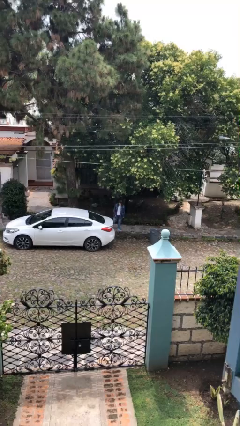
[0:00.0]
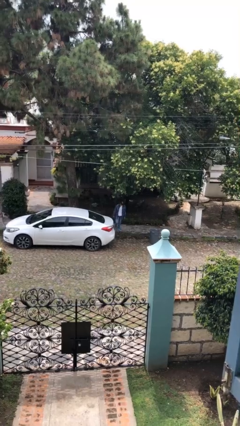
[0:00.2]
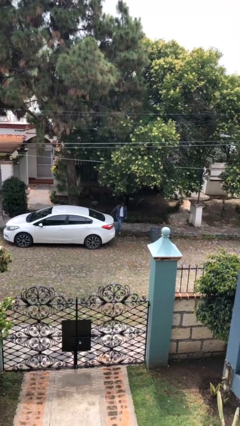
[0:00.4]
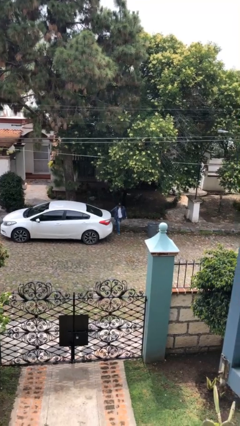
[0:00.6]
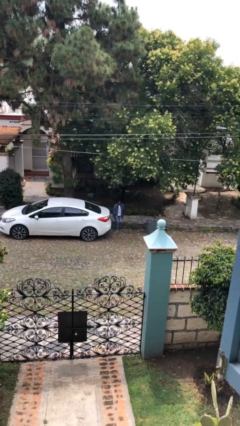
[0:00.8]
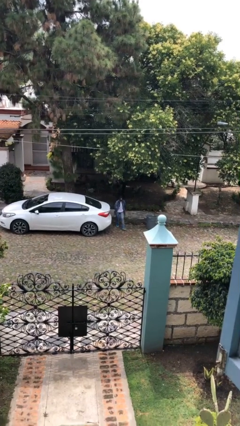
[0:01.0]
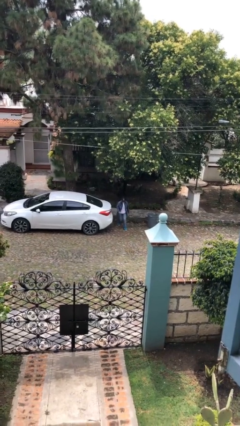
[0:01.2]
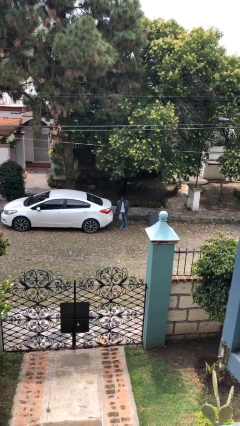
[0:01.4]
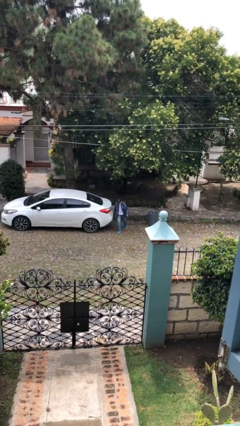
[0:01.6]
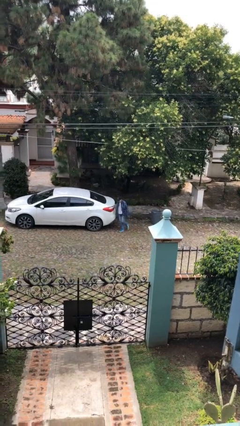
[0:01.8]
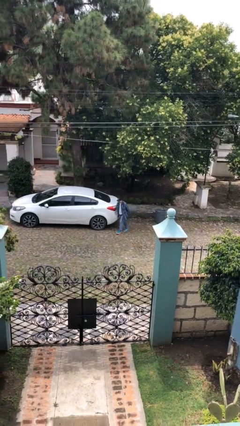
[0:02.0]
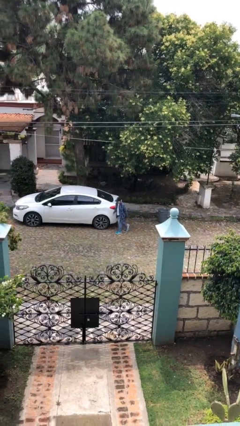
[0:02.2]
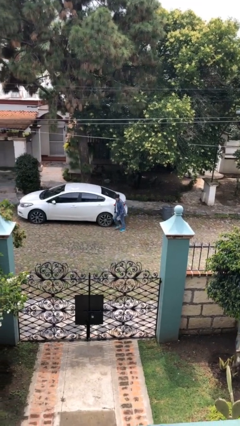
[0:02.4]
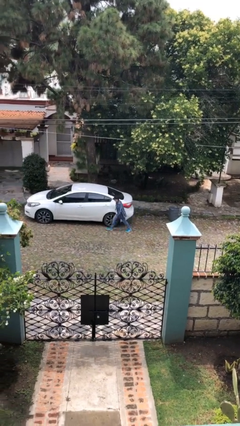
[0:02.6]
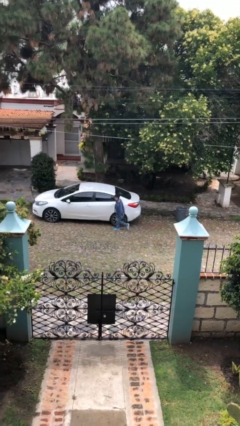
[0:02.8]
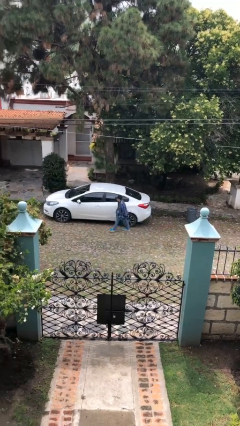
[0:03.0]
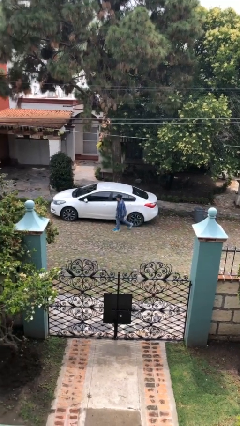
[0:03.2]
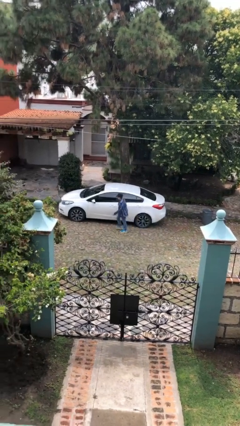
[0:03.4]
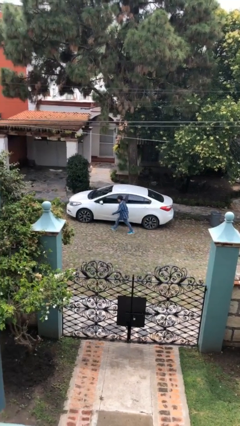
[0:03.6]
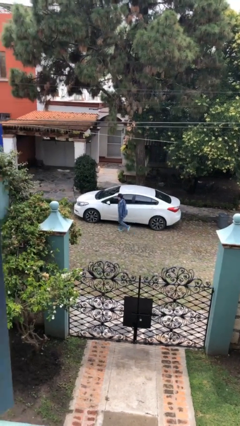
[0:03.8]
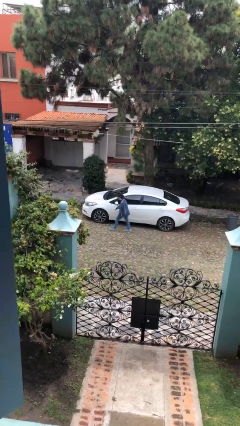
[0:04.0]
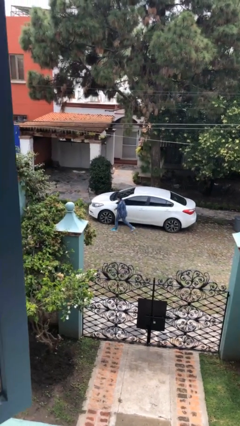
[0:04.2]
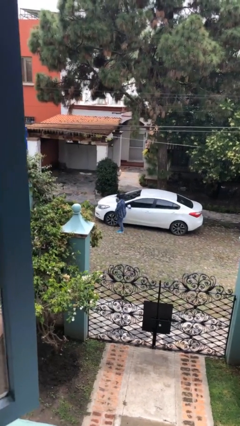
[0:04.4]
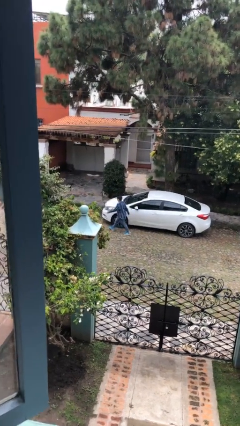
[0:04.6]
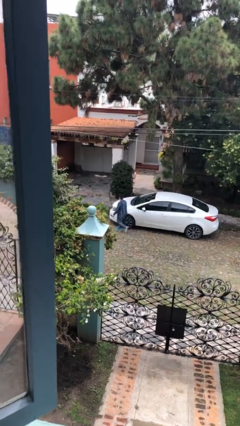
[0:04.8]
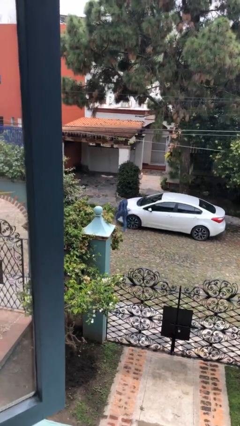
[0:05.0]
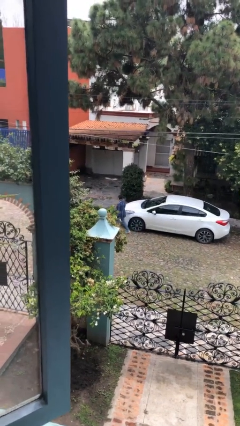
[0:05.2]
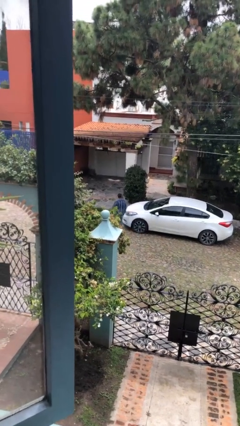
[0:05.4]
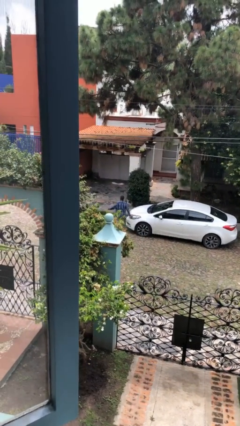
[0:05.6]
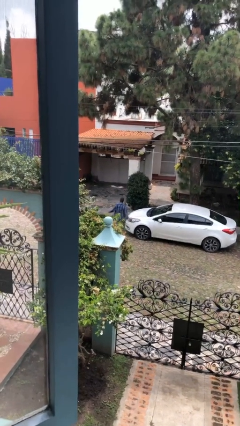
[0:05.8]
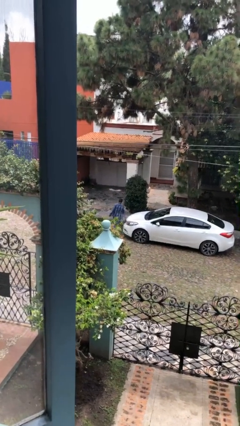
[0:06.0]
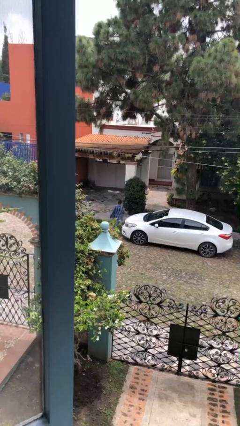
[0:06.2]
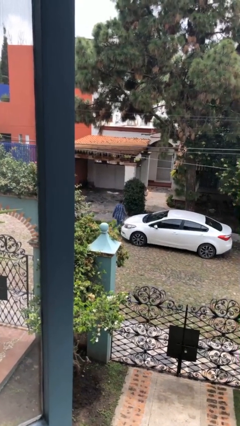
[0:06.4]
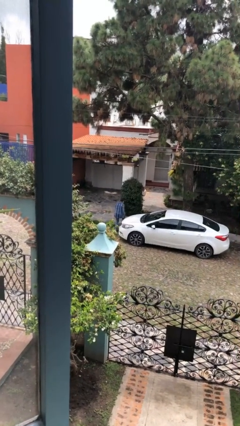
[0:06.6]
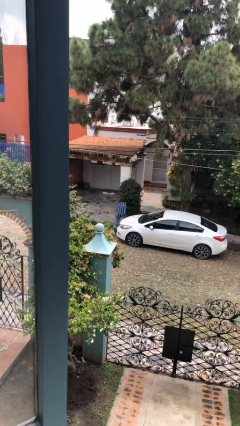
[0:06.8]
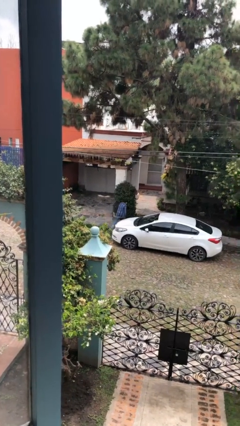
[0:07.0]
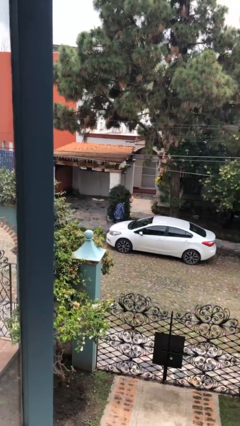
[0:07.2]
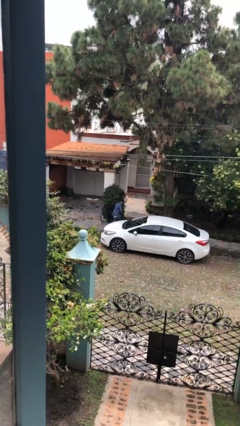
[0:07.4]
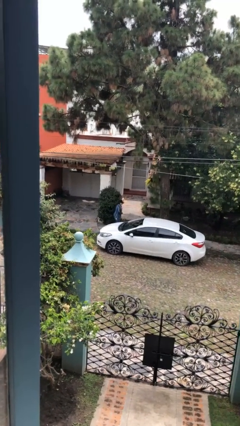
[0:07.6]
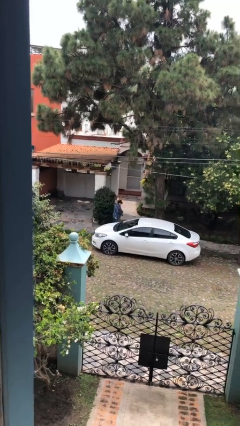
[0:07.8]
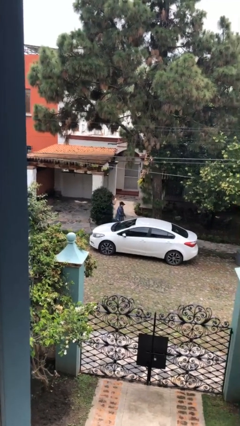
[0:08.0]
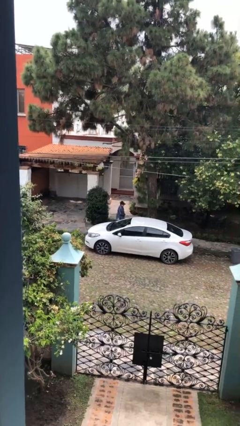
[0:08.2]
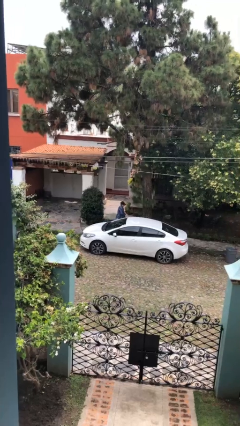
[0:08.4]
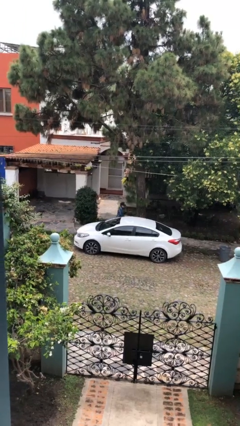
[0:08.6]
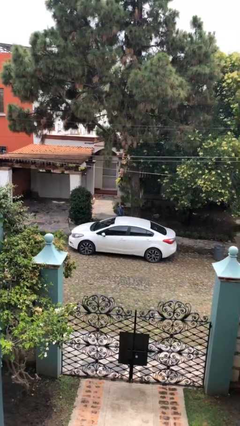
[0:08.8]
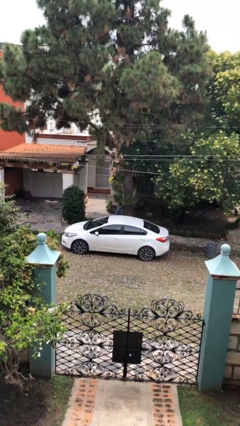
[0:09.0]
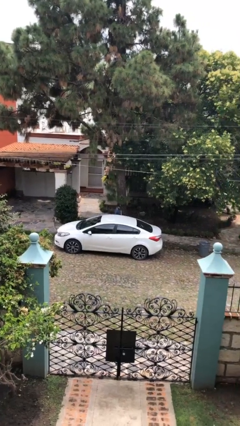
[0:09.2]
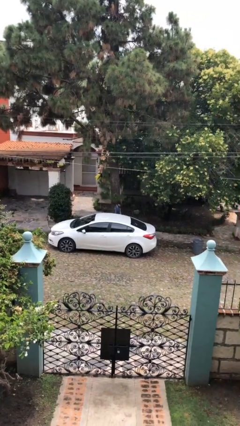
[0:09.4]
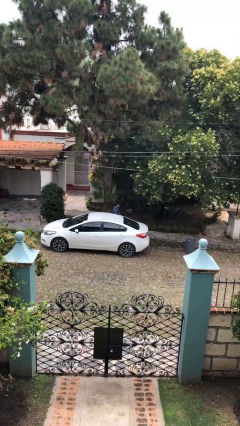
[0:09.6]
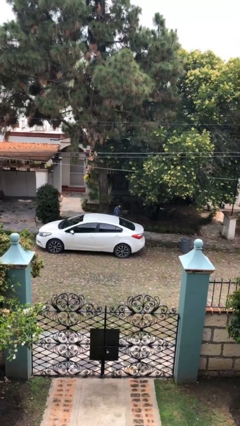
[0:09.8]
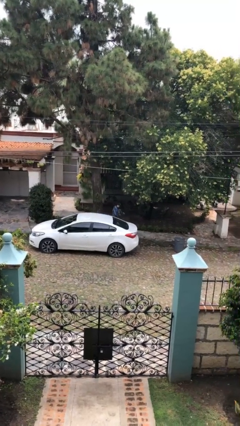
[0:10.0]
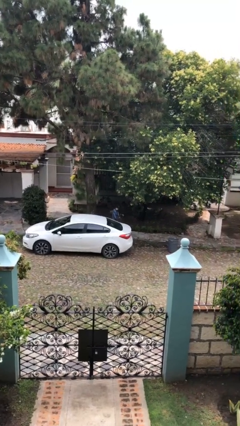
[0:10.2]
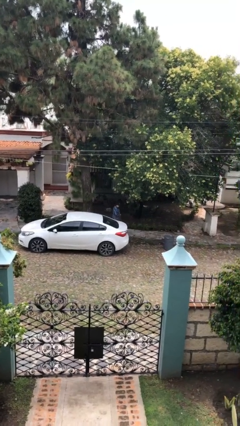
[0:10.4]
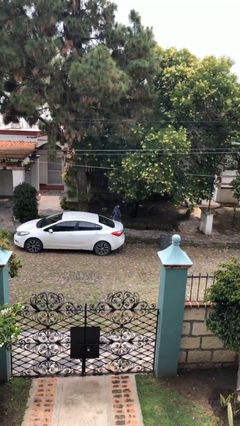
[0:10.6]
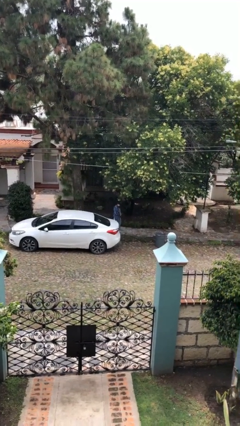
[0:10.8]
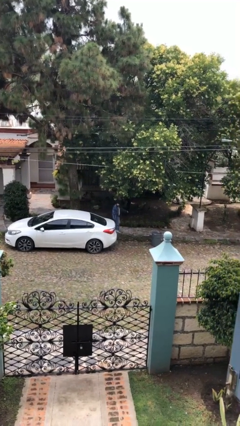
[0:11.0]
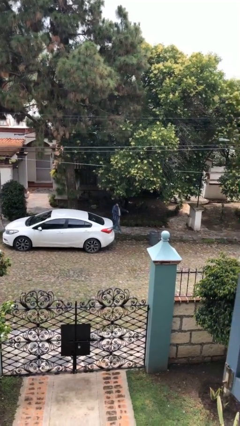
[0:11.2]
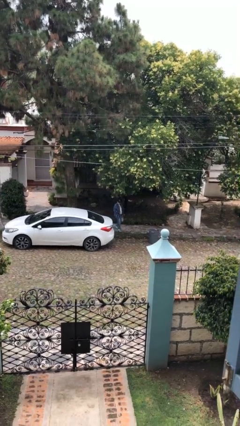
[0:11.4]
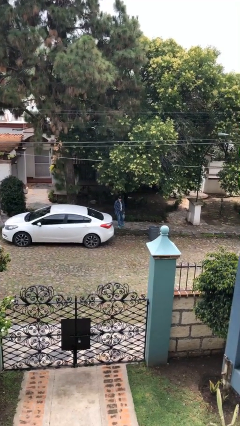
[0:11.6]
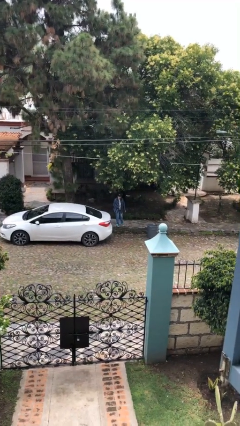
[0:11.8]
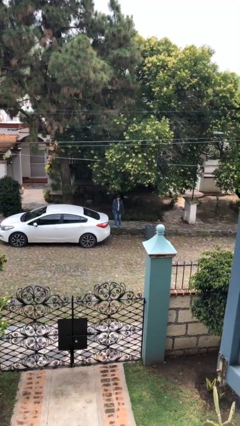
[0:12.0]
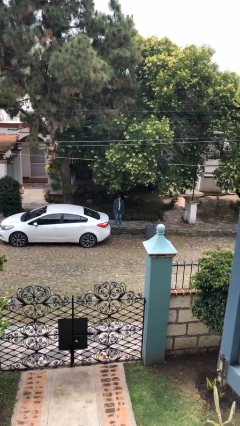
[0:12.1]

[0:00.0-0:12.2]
person walks around car

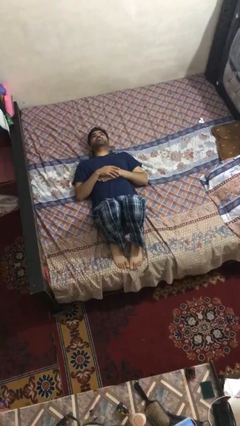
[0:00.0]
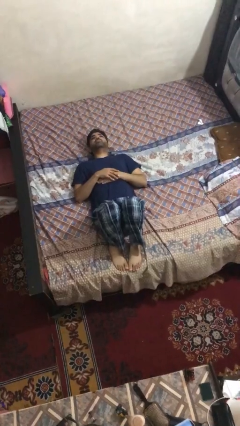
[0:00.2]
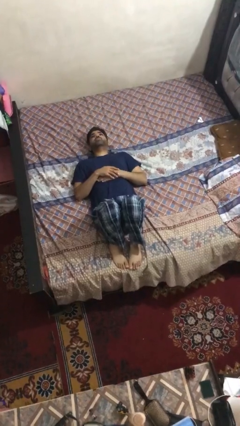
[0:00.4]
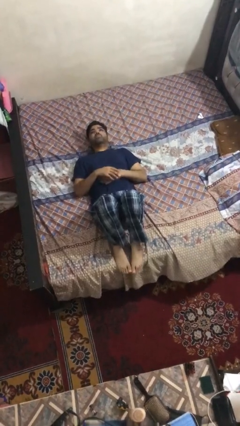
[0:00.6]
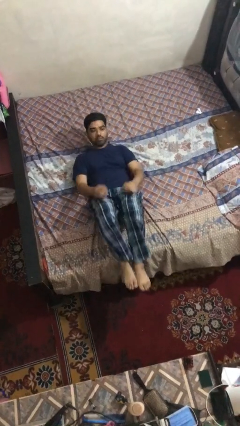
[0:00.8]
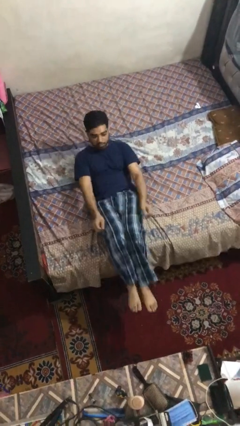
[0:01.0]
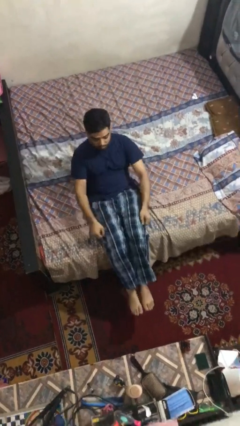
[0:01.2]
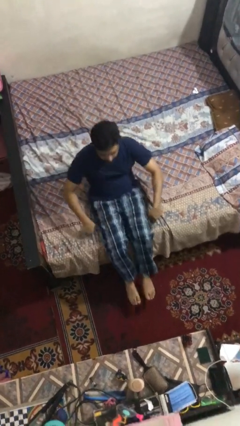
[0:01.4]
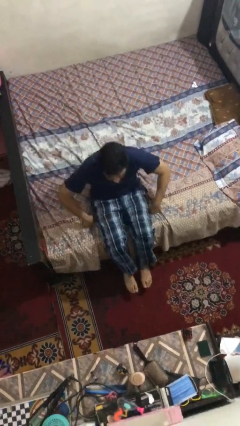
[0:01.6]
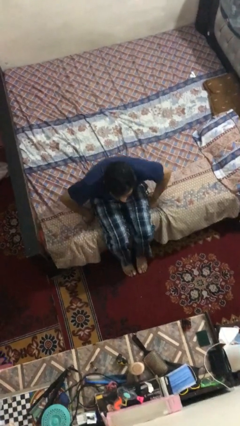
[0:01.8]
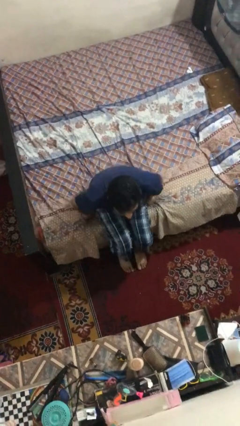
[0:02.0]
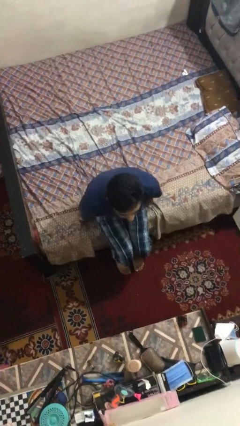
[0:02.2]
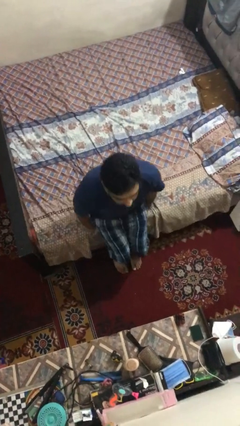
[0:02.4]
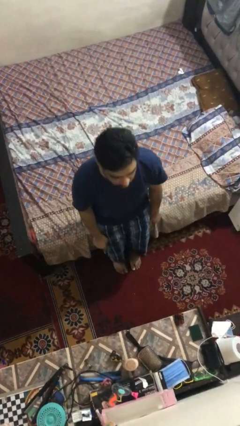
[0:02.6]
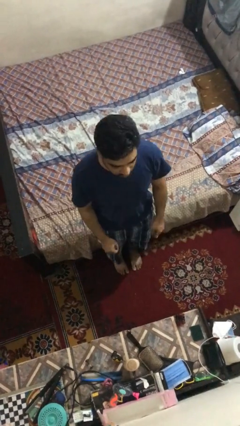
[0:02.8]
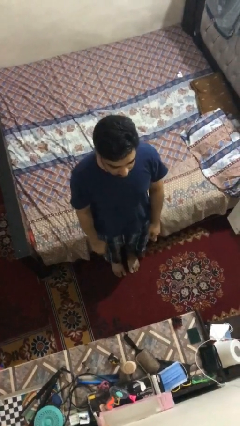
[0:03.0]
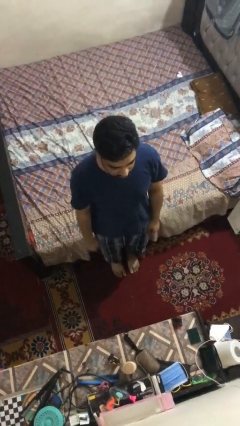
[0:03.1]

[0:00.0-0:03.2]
person stands up

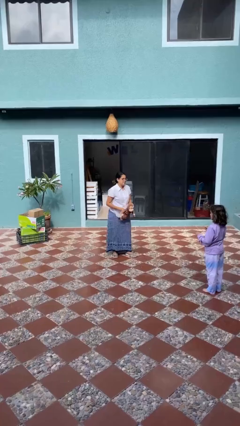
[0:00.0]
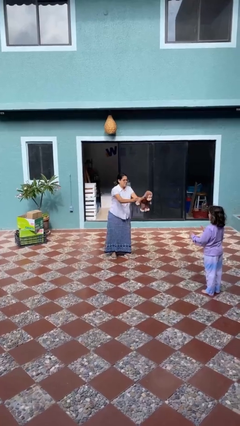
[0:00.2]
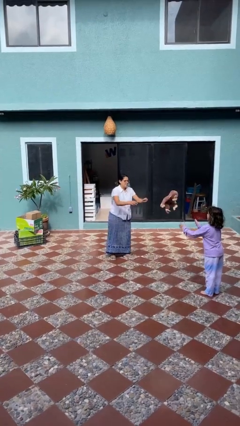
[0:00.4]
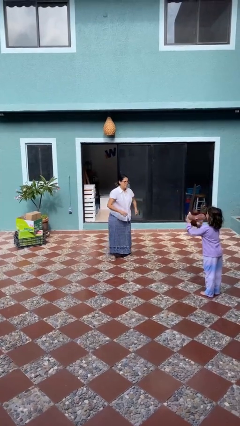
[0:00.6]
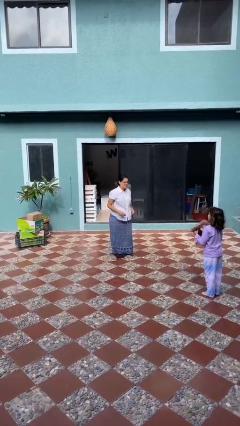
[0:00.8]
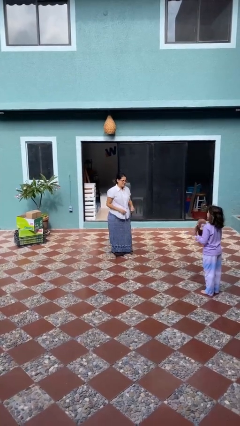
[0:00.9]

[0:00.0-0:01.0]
person throws object to person

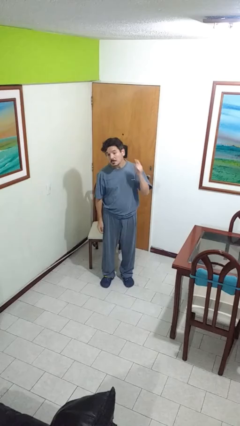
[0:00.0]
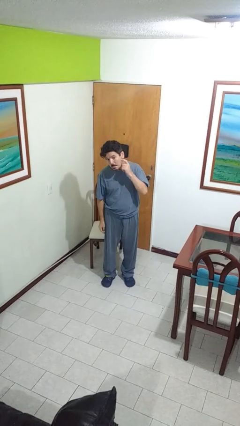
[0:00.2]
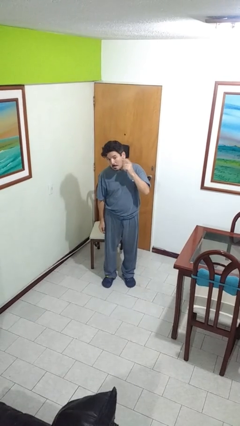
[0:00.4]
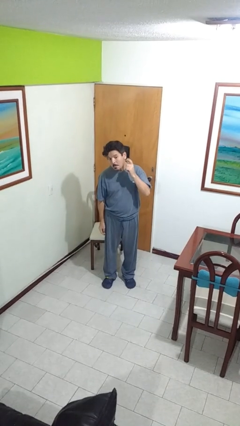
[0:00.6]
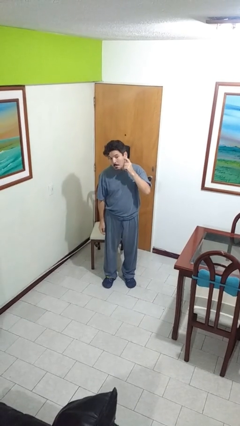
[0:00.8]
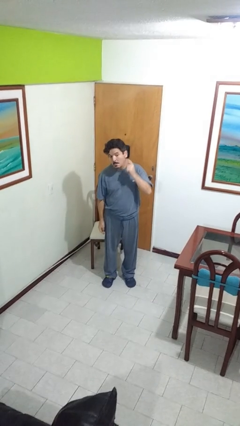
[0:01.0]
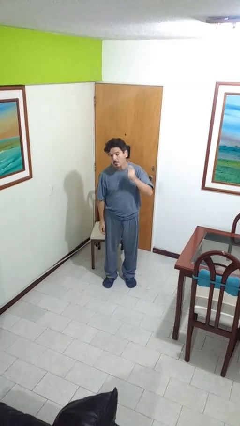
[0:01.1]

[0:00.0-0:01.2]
person gestures listen closely

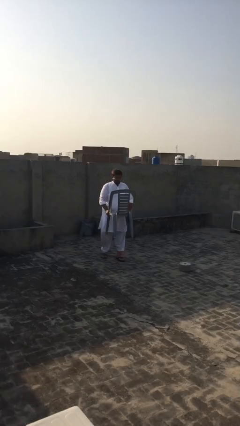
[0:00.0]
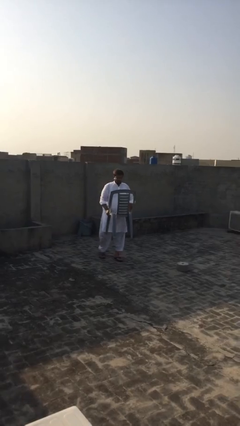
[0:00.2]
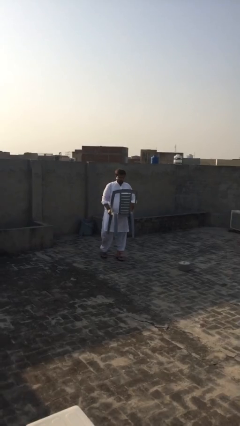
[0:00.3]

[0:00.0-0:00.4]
person puts down object on floor
